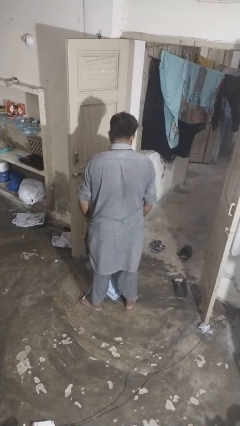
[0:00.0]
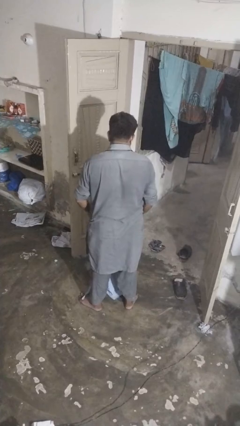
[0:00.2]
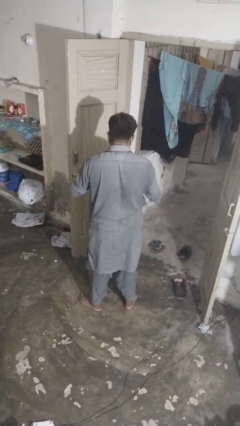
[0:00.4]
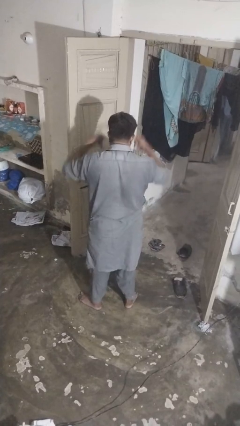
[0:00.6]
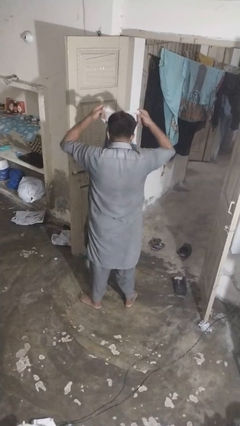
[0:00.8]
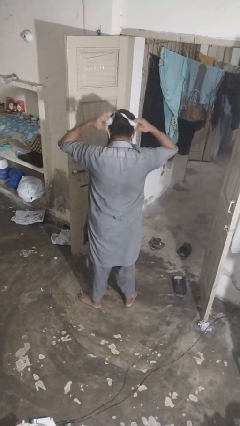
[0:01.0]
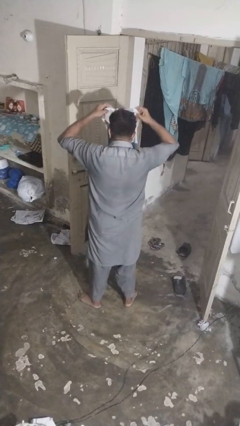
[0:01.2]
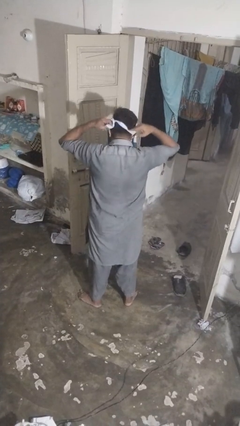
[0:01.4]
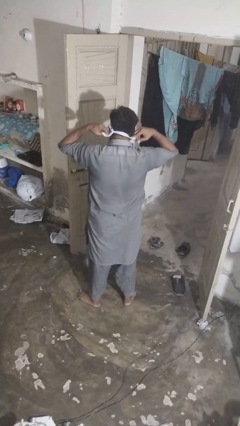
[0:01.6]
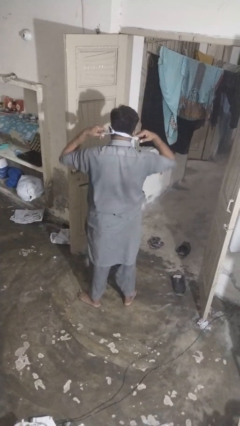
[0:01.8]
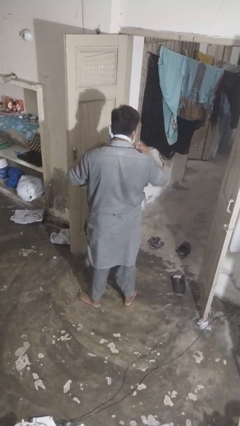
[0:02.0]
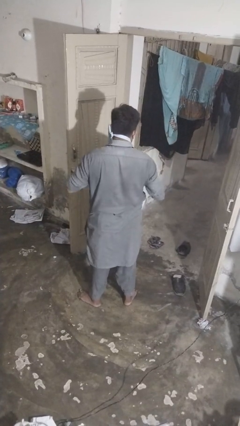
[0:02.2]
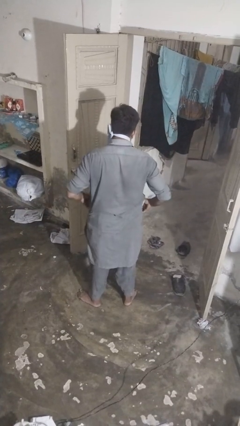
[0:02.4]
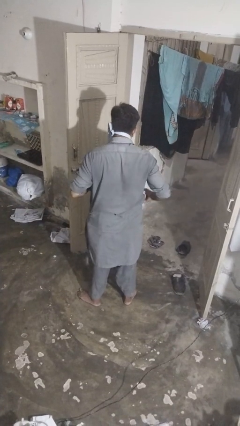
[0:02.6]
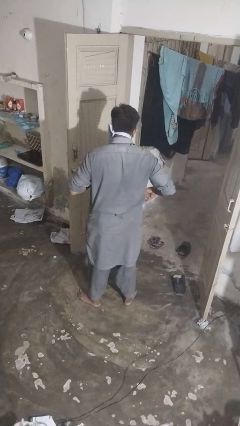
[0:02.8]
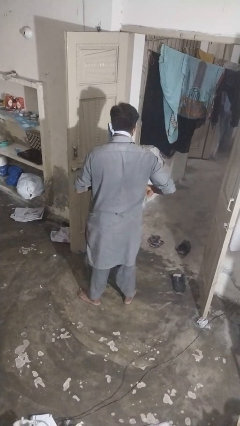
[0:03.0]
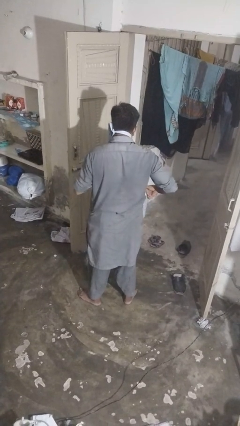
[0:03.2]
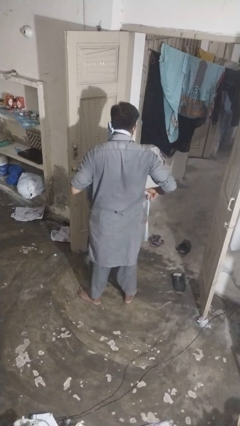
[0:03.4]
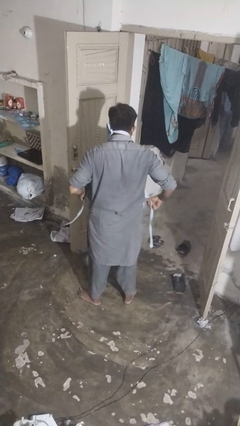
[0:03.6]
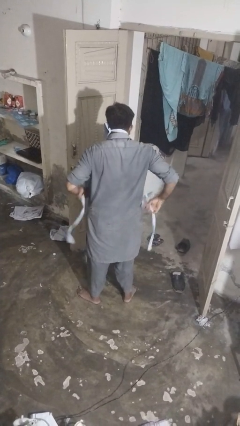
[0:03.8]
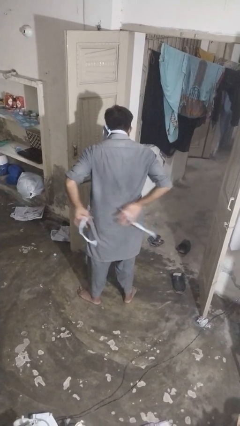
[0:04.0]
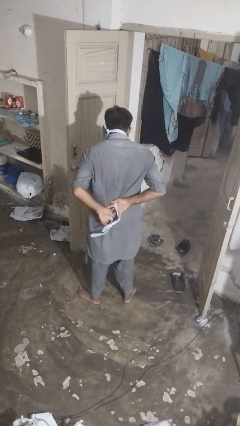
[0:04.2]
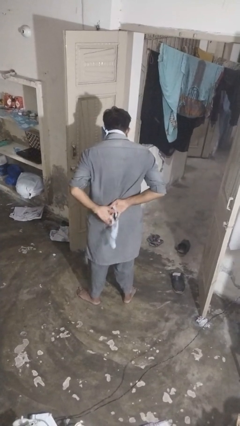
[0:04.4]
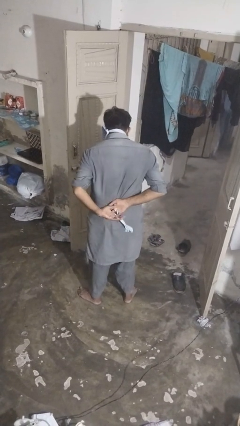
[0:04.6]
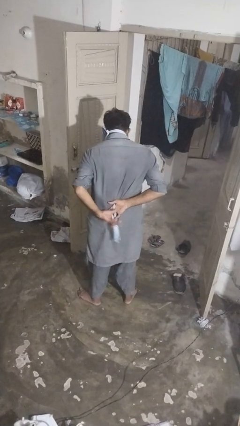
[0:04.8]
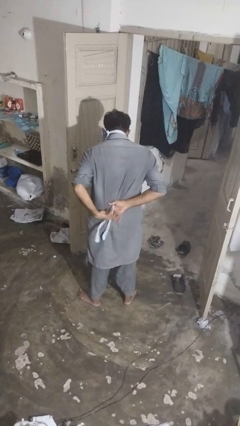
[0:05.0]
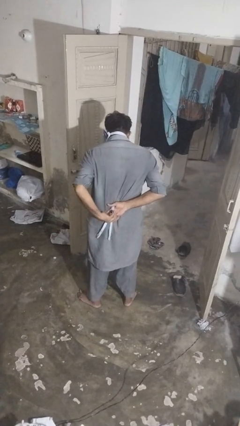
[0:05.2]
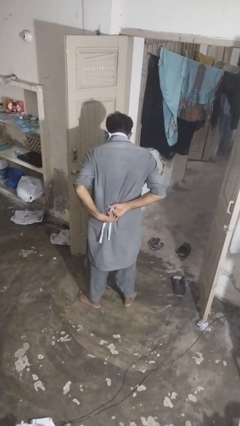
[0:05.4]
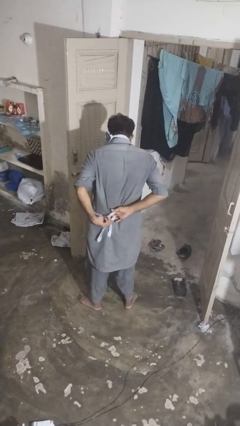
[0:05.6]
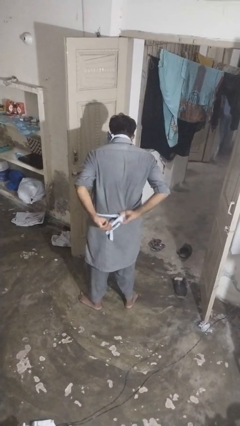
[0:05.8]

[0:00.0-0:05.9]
person puts on apron

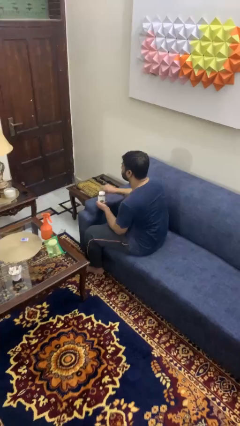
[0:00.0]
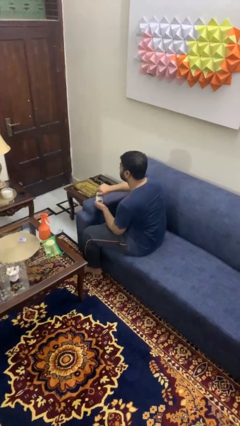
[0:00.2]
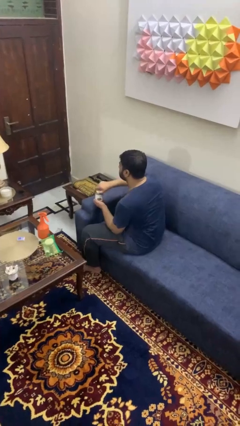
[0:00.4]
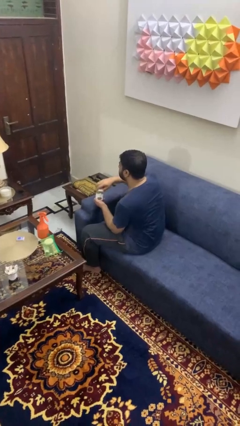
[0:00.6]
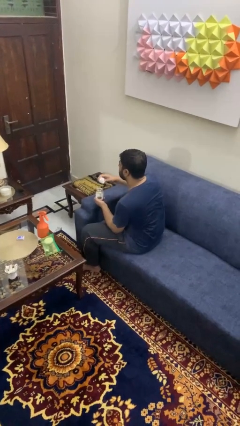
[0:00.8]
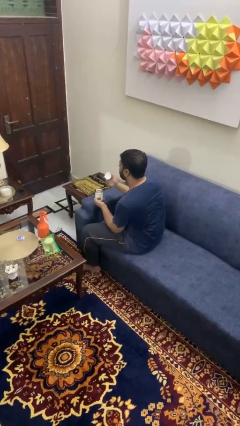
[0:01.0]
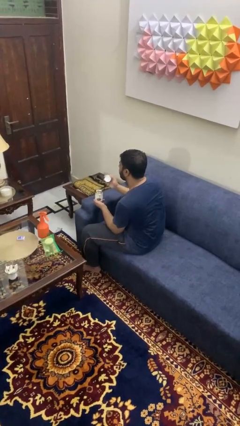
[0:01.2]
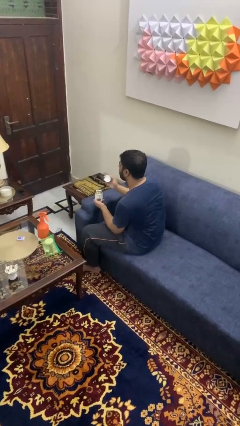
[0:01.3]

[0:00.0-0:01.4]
person opens jar

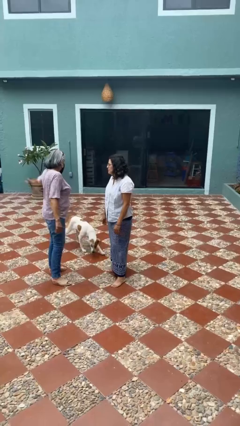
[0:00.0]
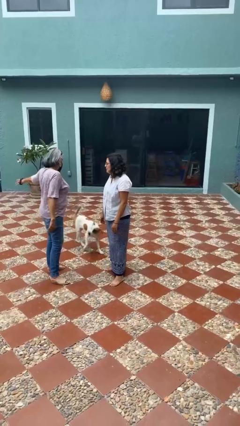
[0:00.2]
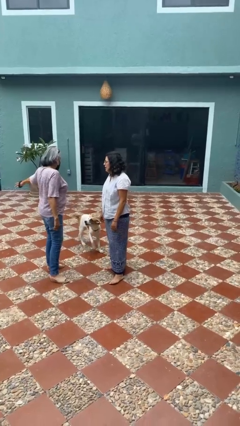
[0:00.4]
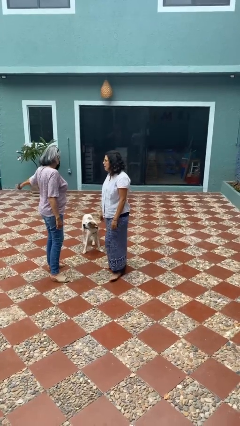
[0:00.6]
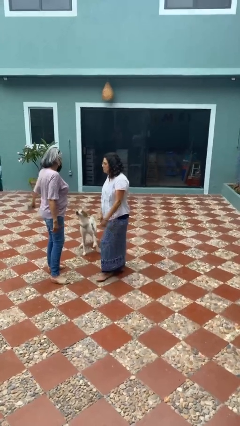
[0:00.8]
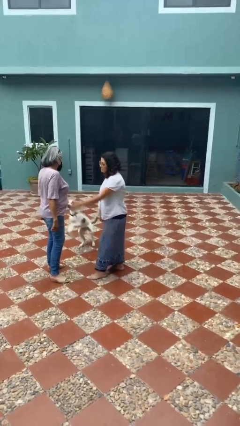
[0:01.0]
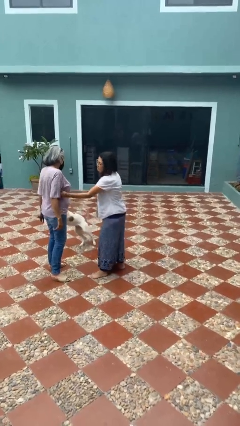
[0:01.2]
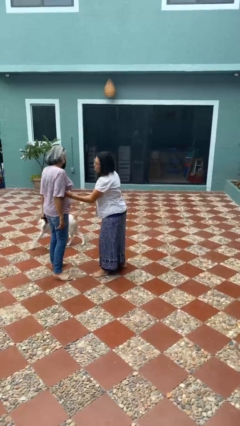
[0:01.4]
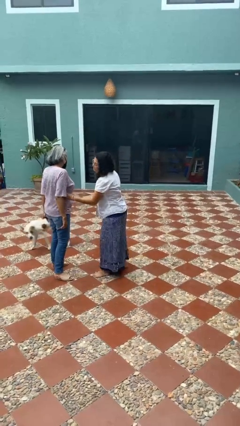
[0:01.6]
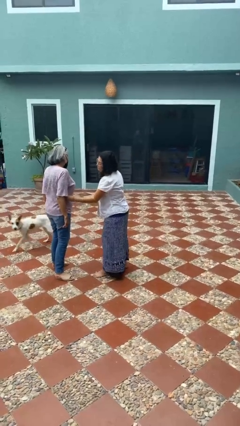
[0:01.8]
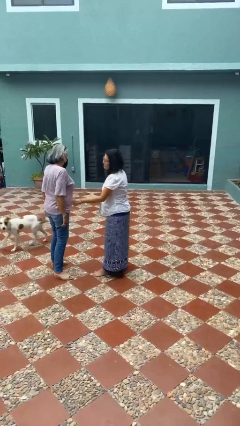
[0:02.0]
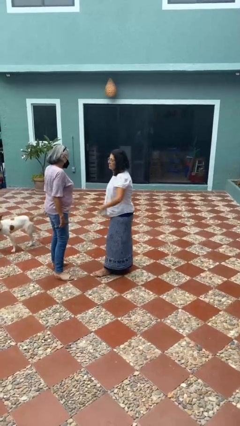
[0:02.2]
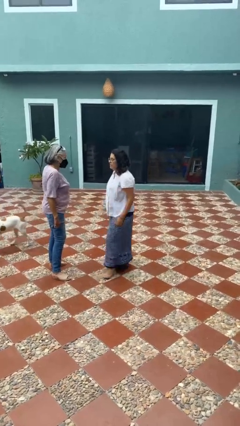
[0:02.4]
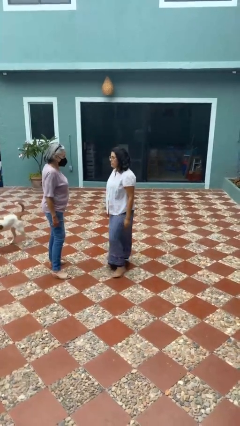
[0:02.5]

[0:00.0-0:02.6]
person tickles person

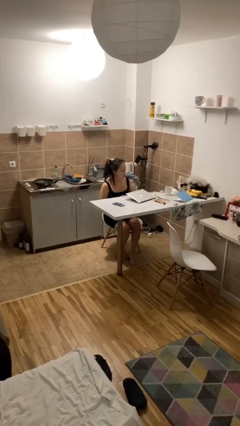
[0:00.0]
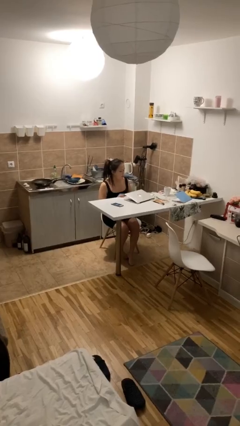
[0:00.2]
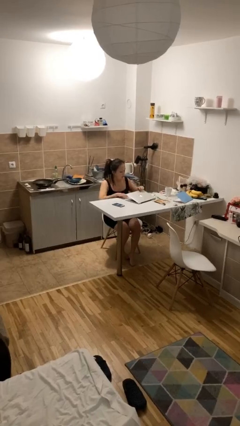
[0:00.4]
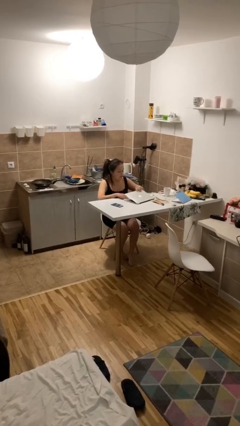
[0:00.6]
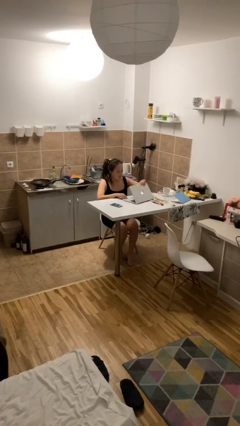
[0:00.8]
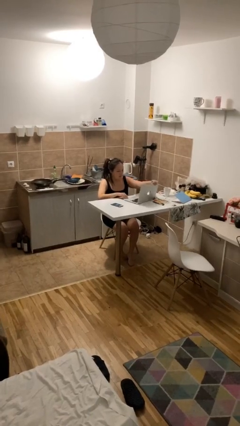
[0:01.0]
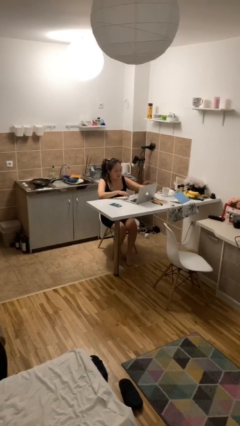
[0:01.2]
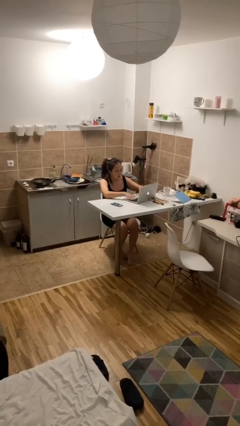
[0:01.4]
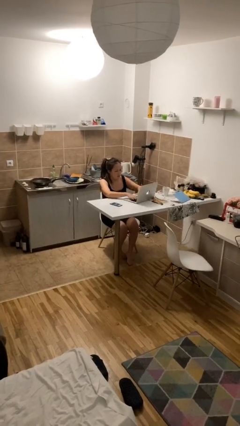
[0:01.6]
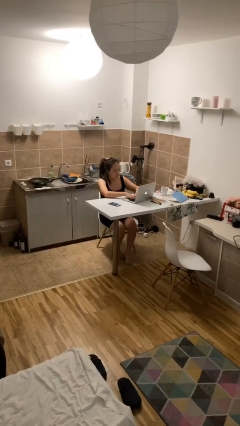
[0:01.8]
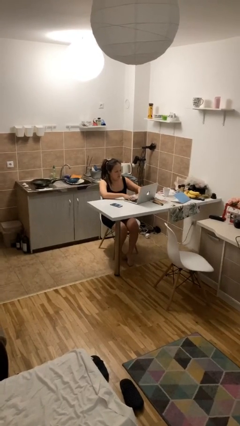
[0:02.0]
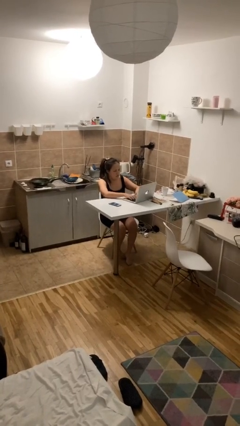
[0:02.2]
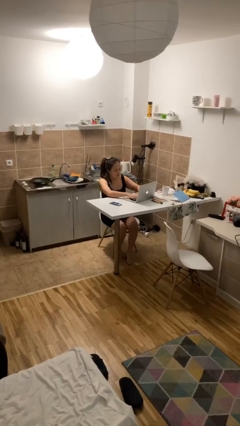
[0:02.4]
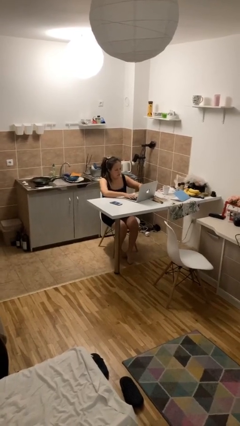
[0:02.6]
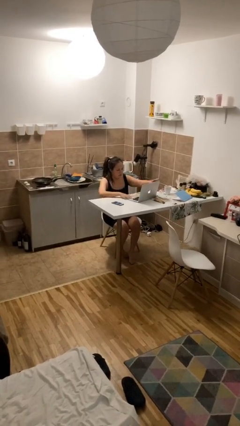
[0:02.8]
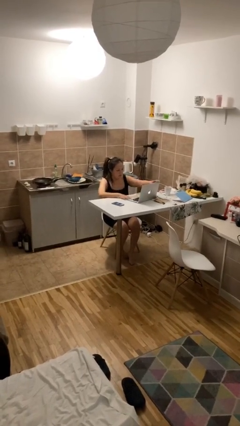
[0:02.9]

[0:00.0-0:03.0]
person interacts with laptop

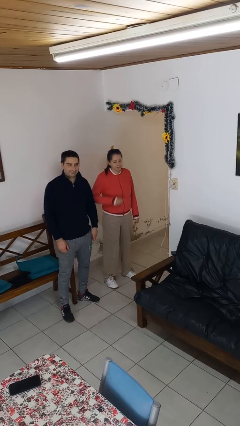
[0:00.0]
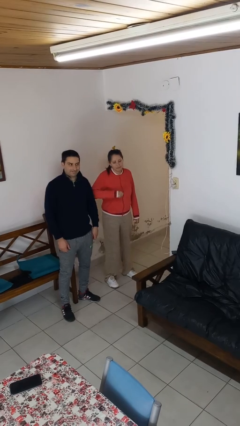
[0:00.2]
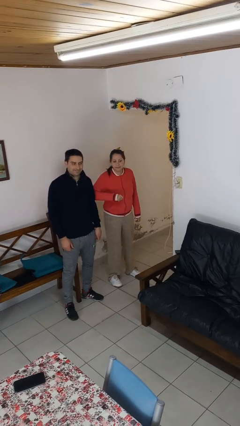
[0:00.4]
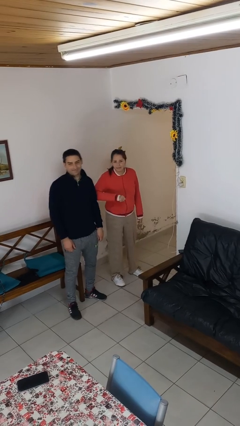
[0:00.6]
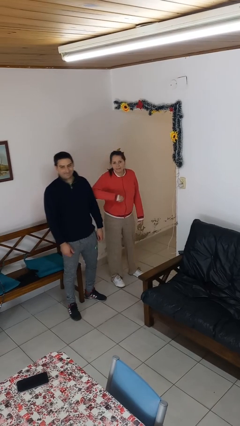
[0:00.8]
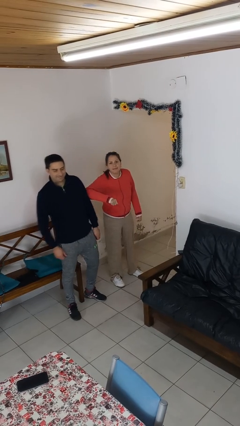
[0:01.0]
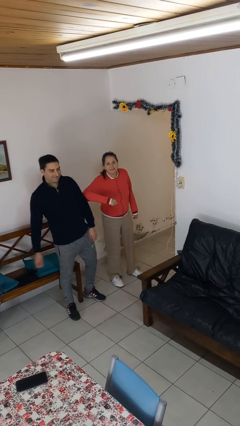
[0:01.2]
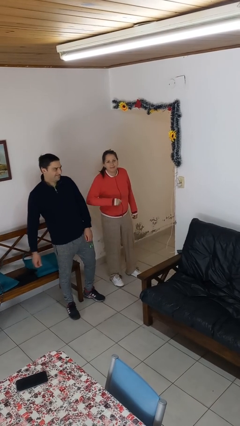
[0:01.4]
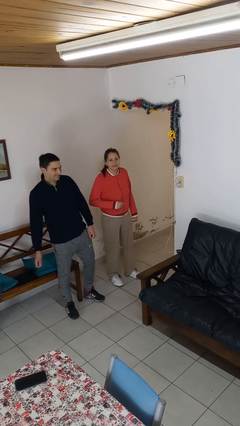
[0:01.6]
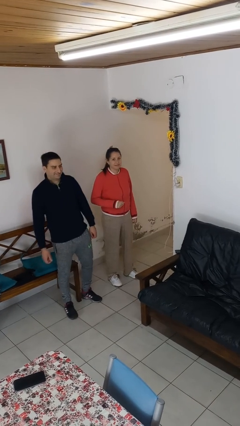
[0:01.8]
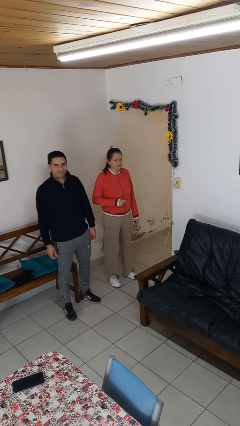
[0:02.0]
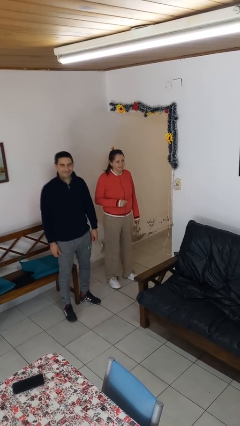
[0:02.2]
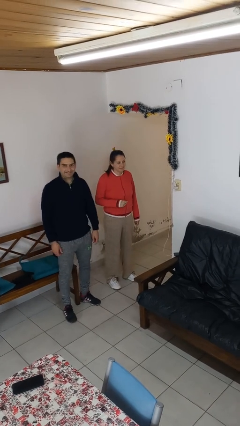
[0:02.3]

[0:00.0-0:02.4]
person nudges person with elbow

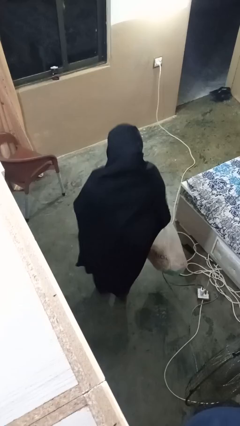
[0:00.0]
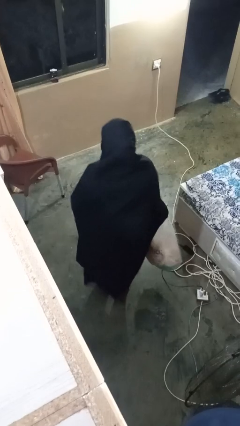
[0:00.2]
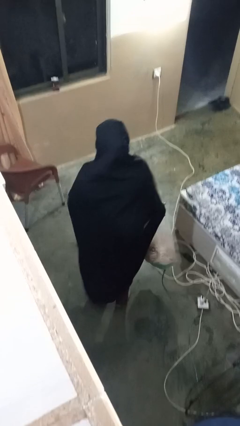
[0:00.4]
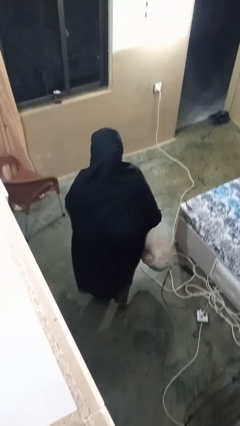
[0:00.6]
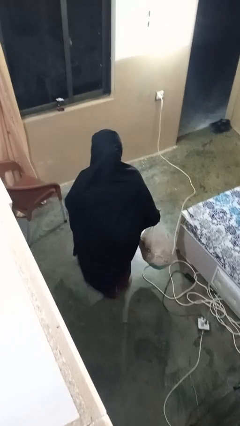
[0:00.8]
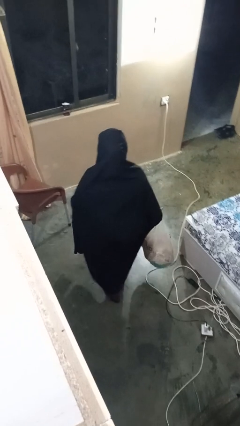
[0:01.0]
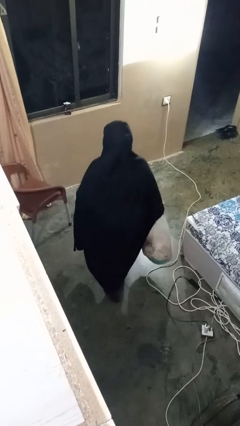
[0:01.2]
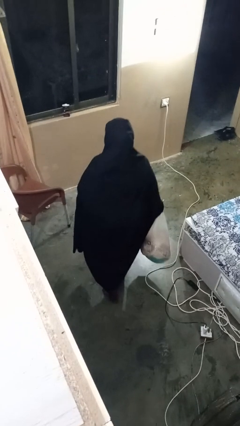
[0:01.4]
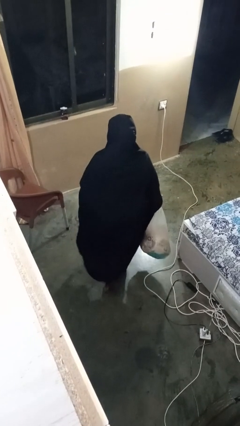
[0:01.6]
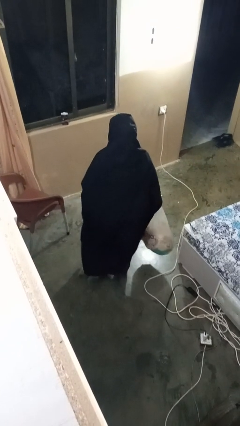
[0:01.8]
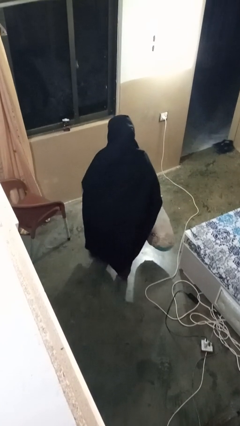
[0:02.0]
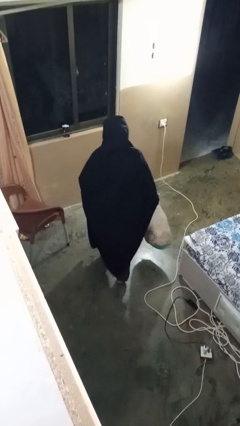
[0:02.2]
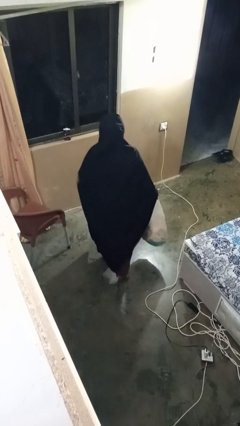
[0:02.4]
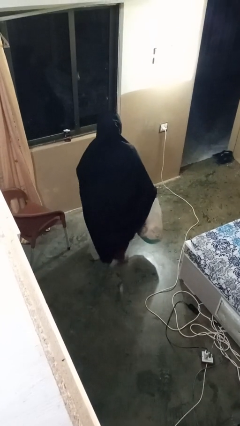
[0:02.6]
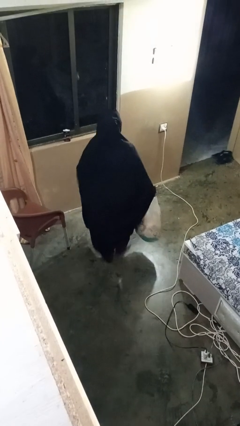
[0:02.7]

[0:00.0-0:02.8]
person carries groceries
